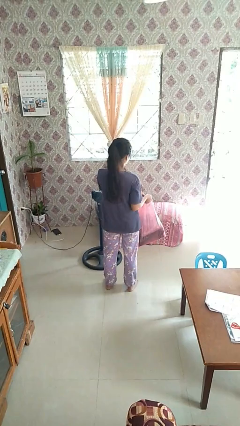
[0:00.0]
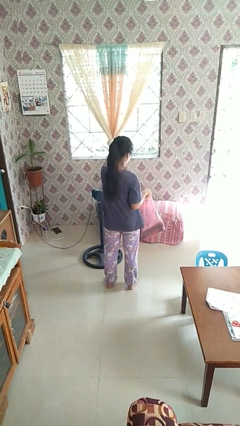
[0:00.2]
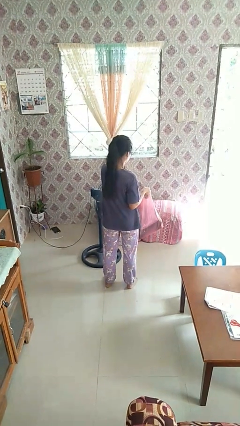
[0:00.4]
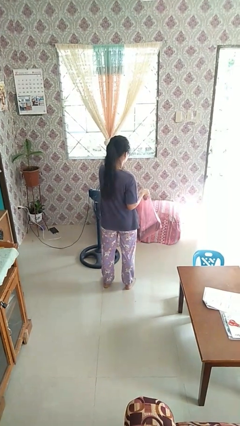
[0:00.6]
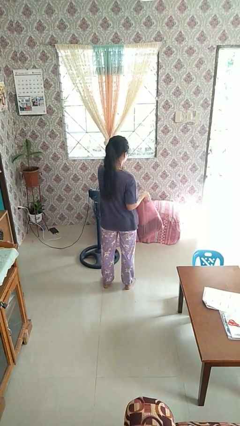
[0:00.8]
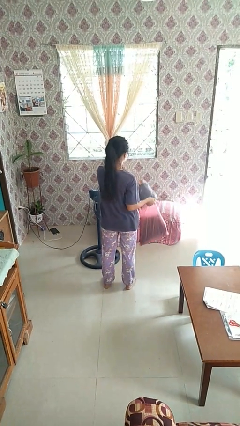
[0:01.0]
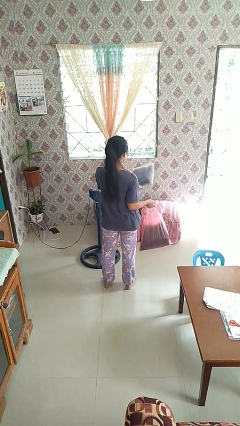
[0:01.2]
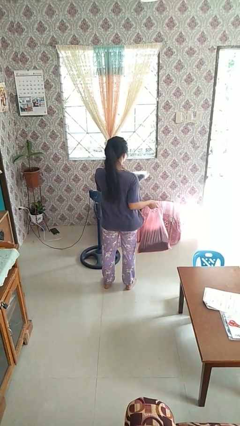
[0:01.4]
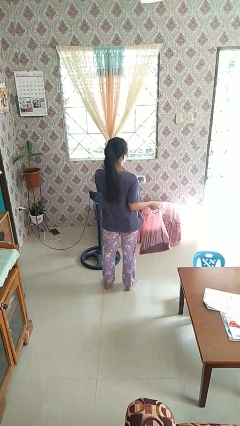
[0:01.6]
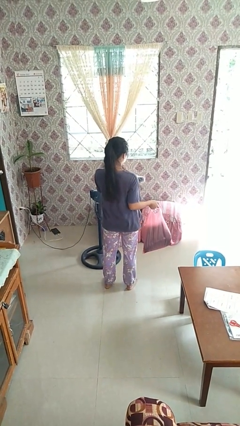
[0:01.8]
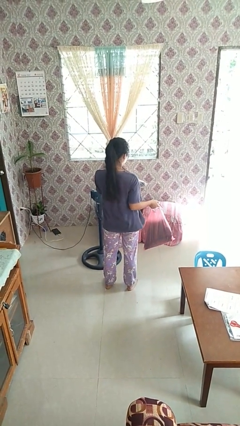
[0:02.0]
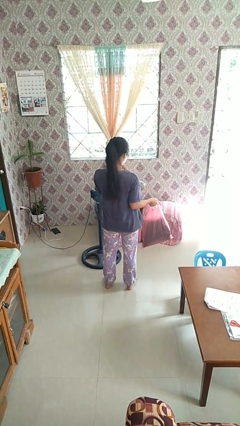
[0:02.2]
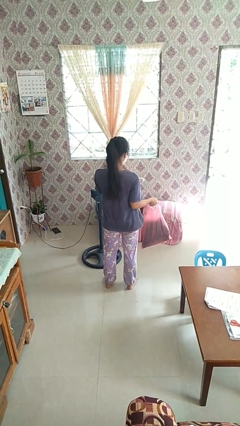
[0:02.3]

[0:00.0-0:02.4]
person takes object from bag

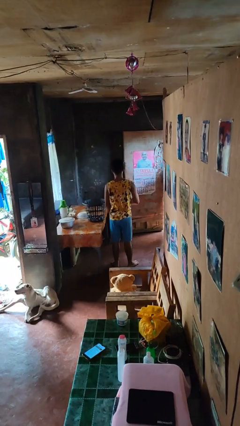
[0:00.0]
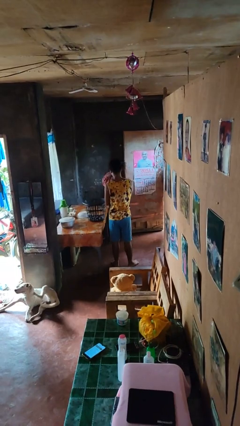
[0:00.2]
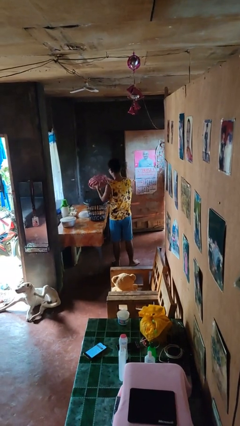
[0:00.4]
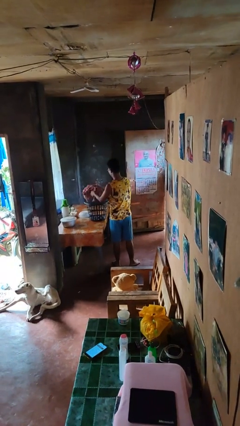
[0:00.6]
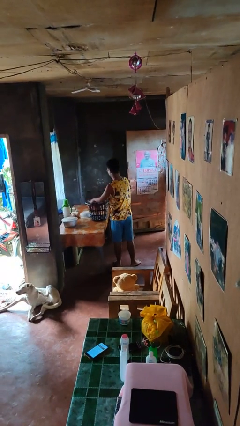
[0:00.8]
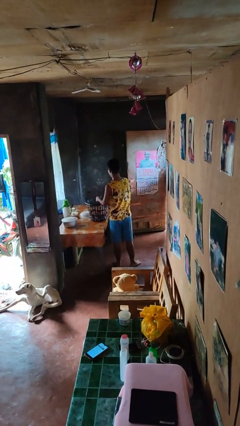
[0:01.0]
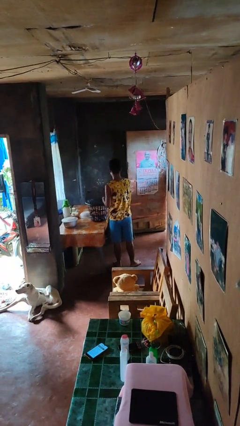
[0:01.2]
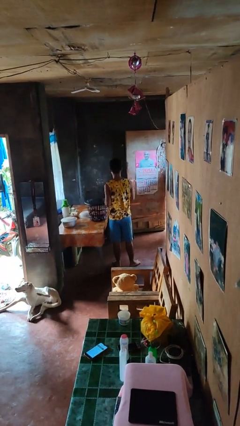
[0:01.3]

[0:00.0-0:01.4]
person puts object into basket

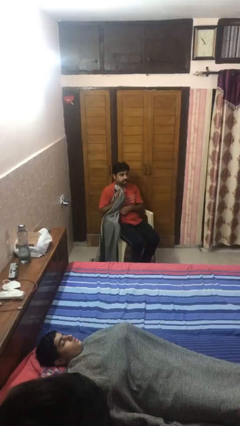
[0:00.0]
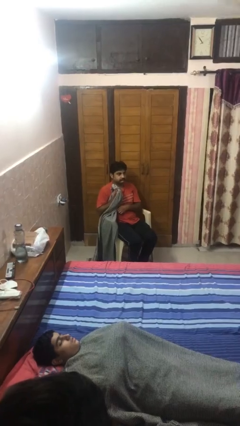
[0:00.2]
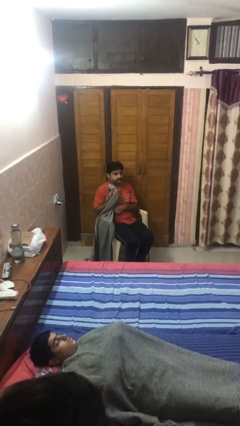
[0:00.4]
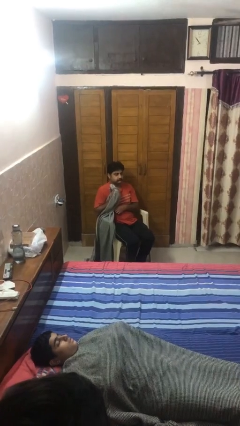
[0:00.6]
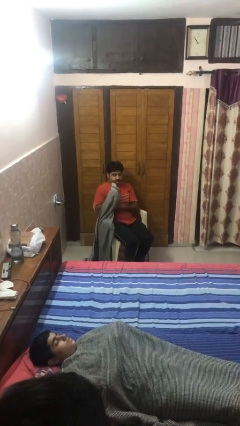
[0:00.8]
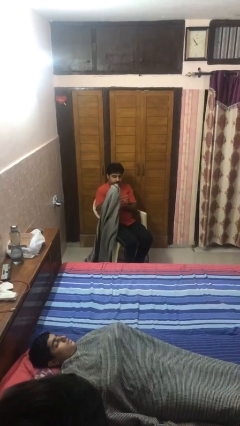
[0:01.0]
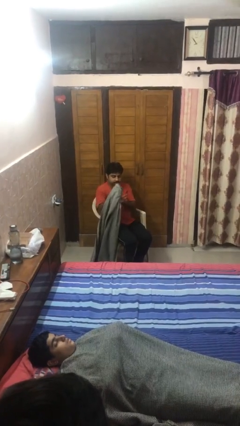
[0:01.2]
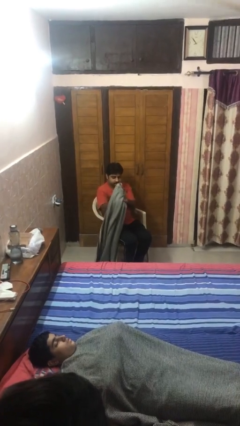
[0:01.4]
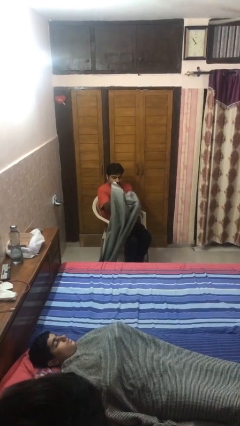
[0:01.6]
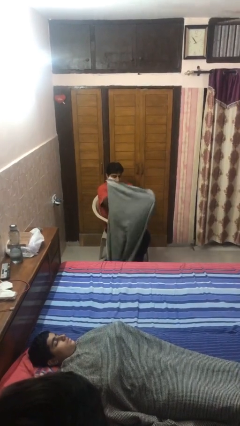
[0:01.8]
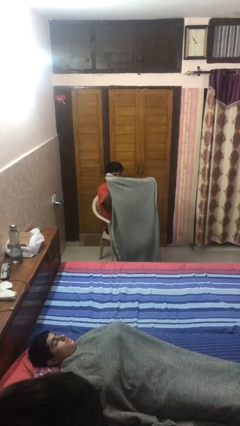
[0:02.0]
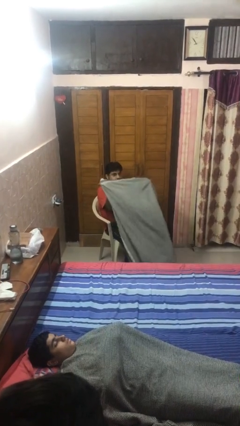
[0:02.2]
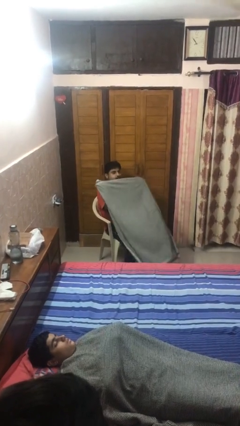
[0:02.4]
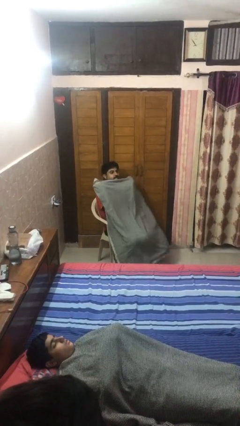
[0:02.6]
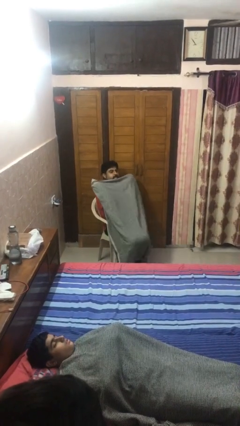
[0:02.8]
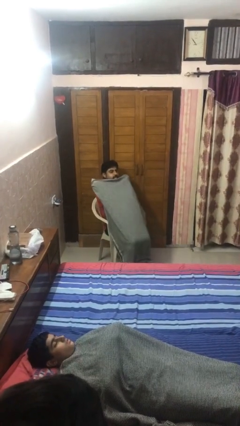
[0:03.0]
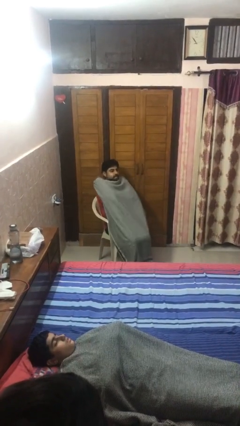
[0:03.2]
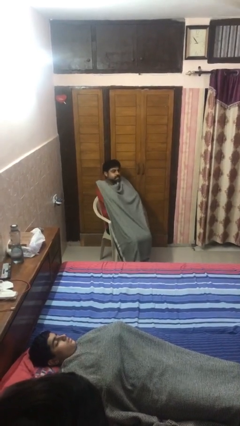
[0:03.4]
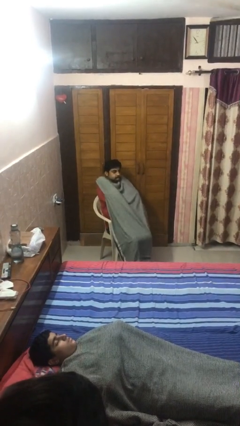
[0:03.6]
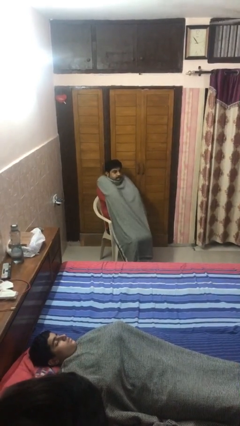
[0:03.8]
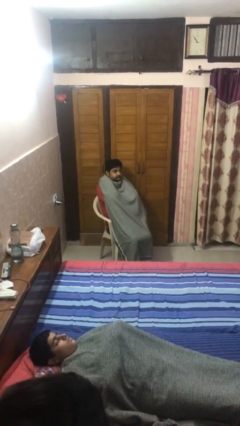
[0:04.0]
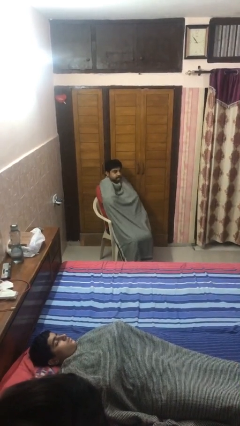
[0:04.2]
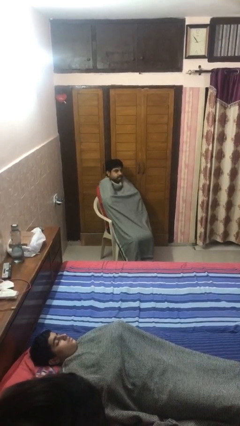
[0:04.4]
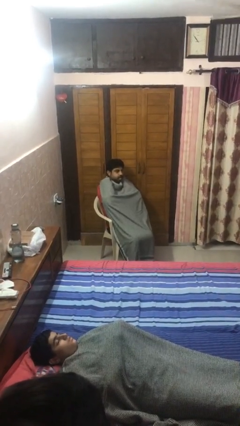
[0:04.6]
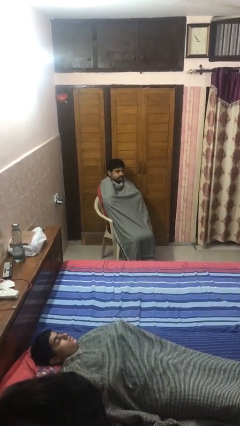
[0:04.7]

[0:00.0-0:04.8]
person covers with blanket

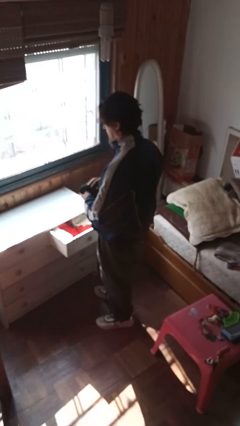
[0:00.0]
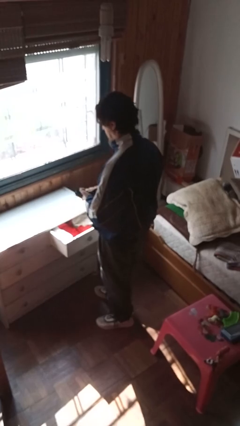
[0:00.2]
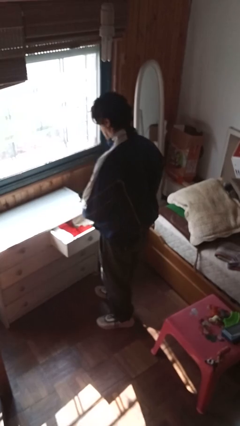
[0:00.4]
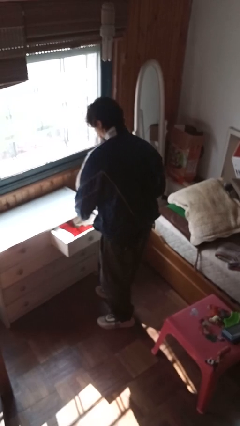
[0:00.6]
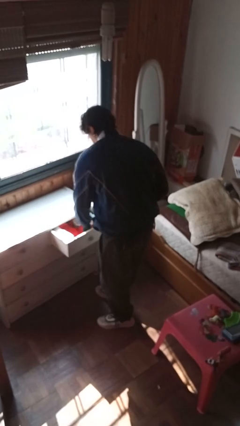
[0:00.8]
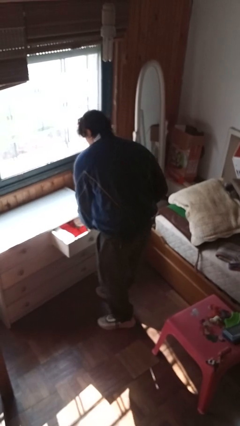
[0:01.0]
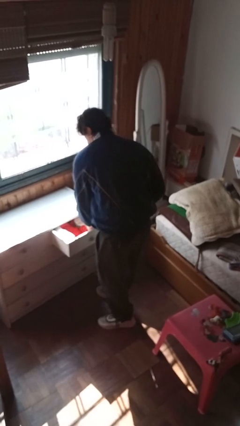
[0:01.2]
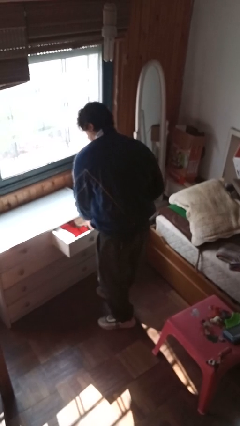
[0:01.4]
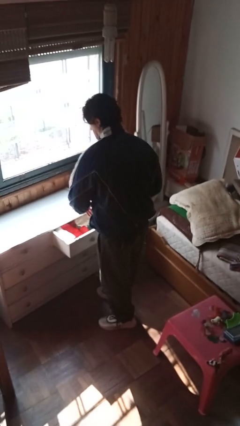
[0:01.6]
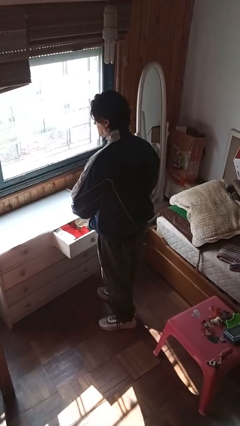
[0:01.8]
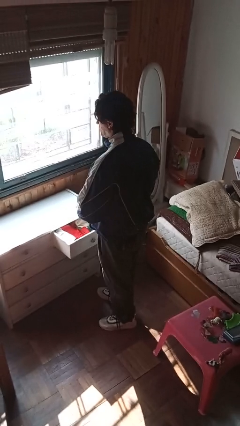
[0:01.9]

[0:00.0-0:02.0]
person puts clothes into dresser

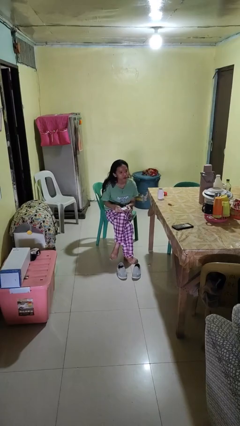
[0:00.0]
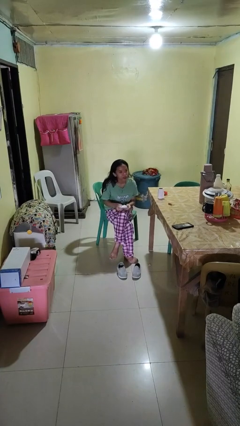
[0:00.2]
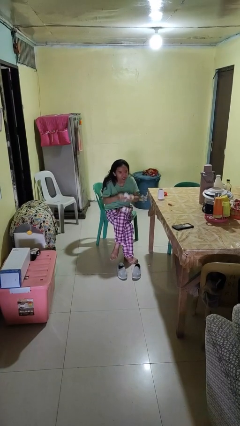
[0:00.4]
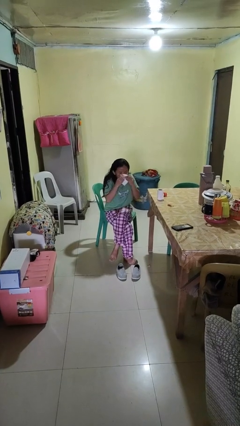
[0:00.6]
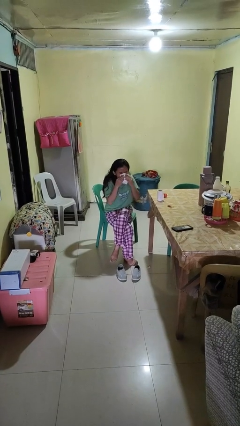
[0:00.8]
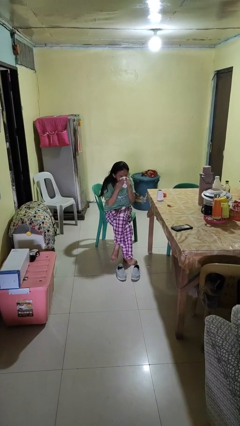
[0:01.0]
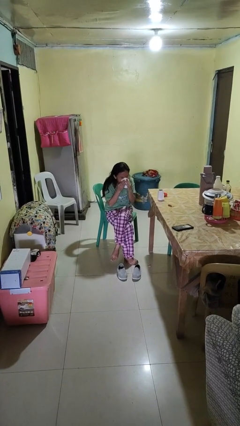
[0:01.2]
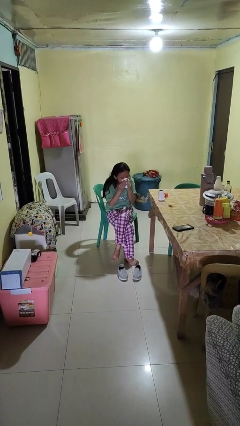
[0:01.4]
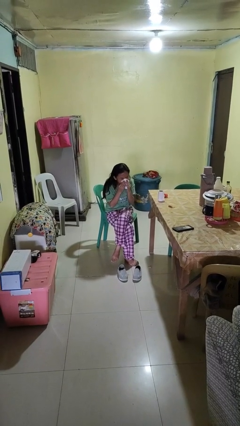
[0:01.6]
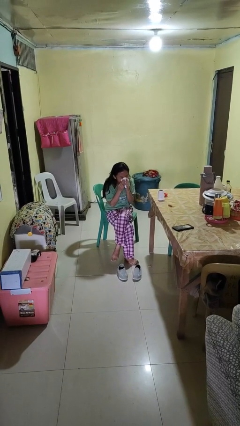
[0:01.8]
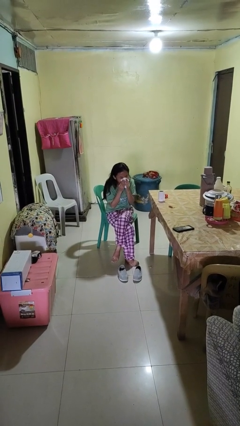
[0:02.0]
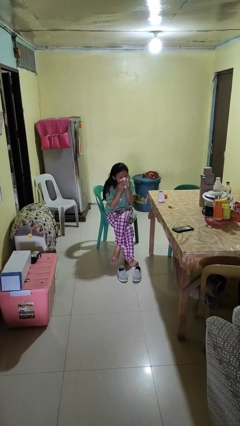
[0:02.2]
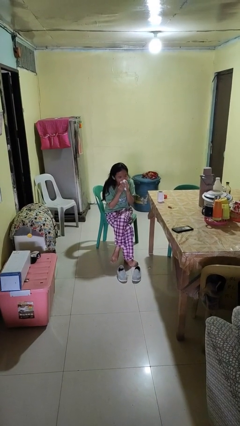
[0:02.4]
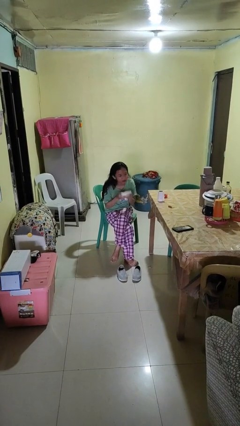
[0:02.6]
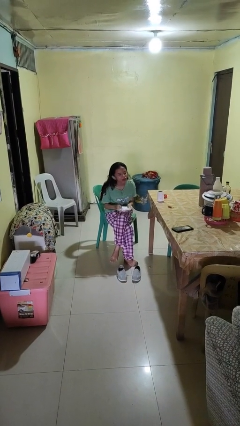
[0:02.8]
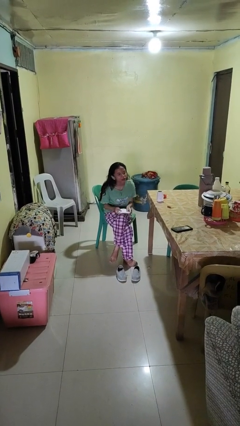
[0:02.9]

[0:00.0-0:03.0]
person blows nose

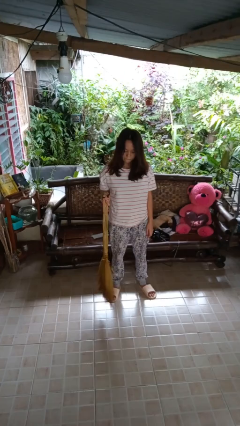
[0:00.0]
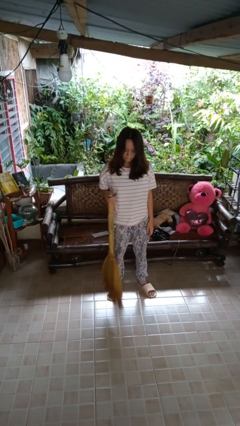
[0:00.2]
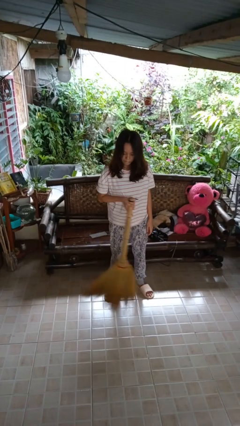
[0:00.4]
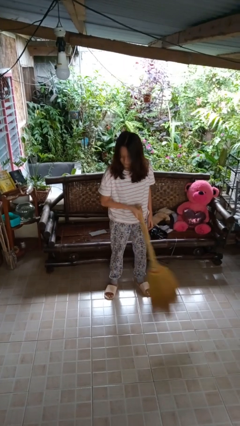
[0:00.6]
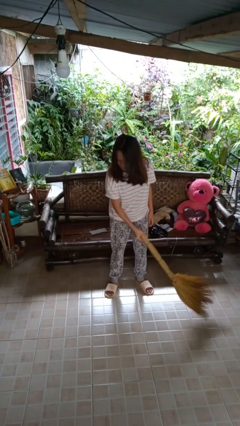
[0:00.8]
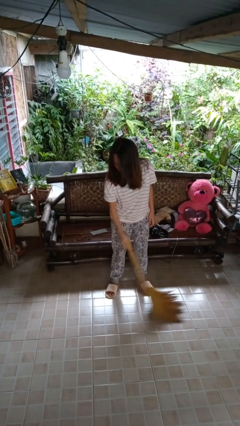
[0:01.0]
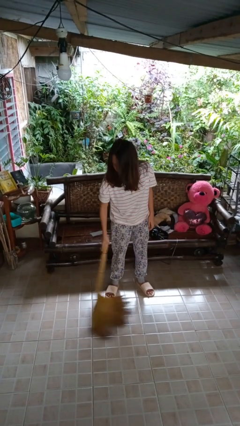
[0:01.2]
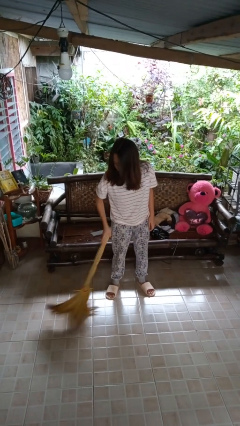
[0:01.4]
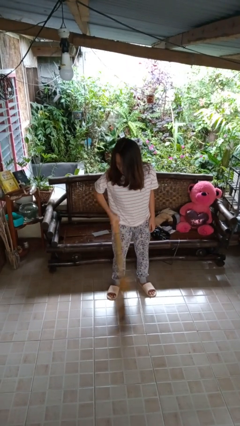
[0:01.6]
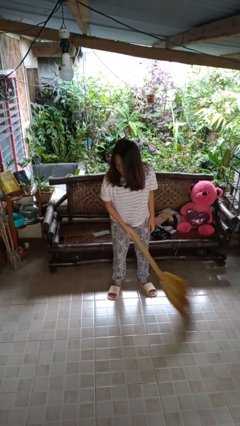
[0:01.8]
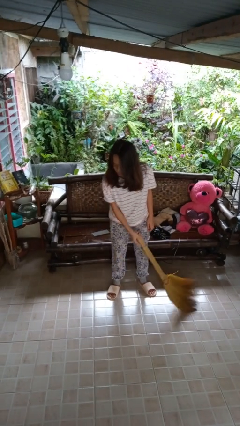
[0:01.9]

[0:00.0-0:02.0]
person sweeps floor

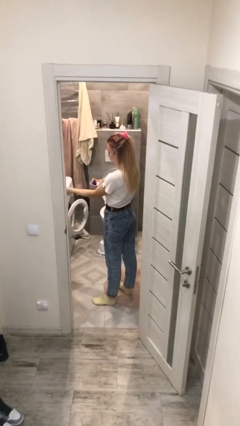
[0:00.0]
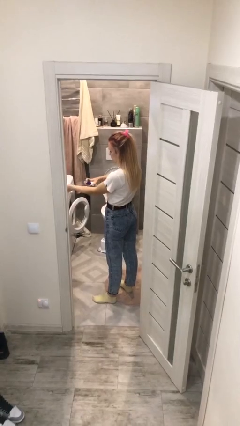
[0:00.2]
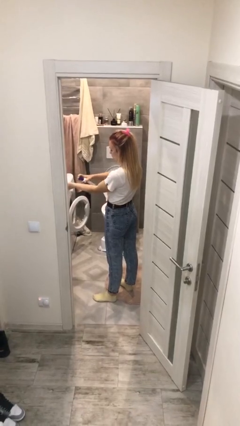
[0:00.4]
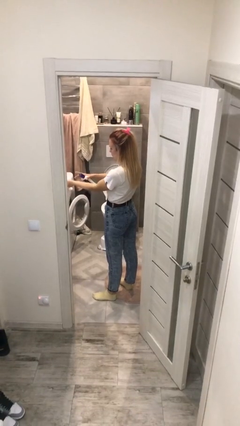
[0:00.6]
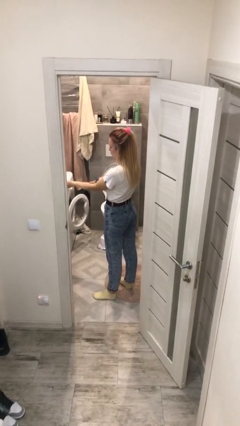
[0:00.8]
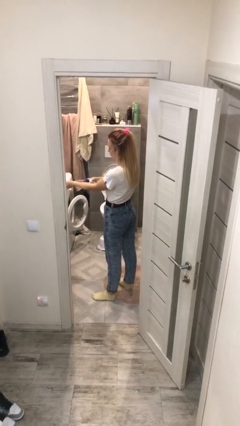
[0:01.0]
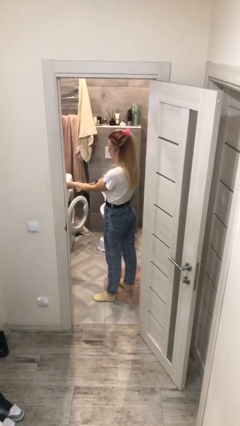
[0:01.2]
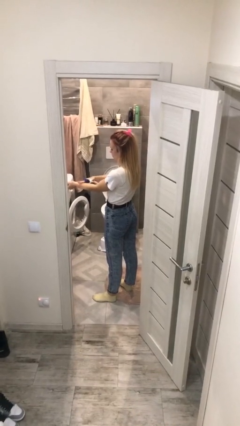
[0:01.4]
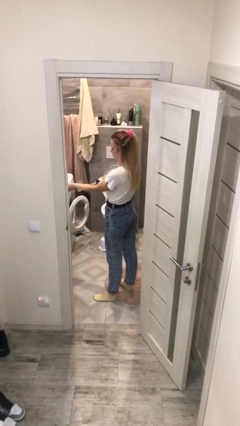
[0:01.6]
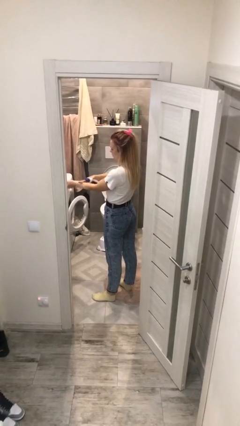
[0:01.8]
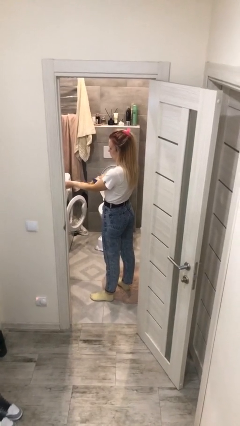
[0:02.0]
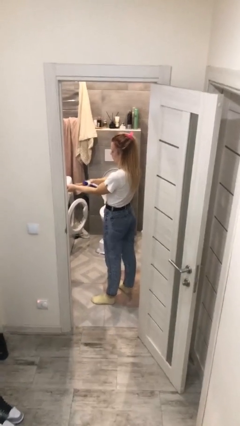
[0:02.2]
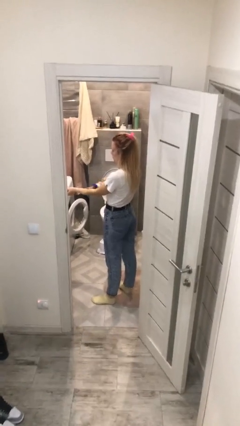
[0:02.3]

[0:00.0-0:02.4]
person applies sunscreen
